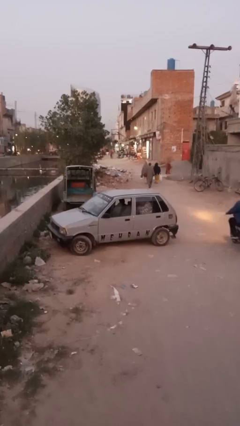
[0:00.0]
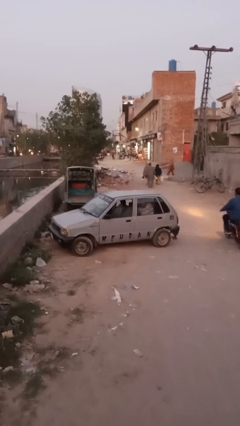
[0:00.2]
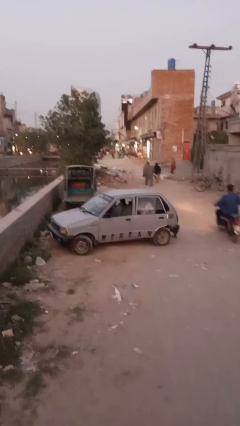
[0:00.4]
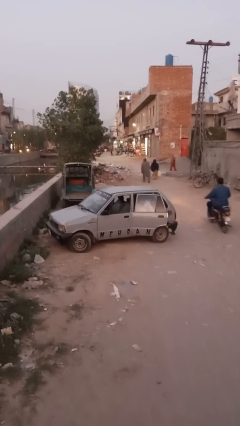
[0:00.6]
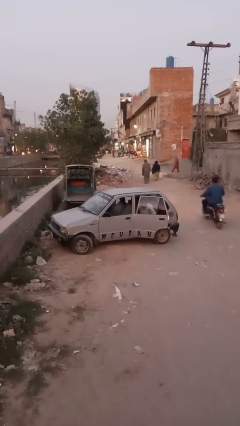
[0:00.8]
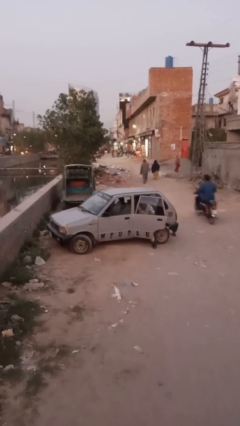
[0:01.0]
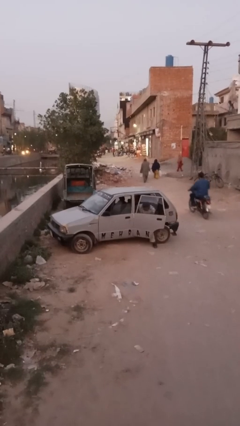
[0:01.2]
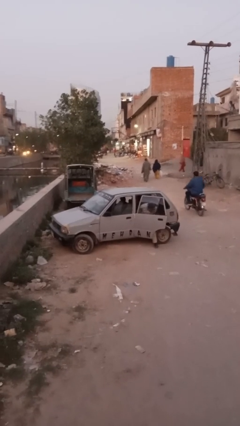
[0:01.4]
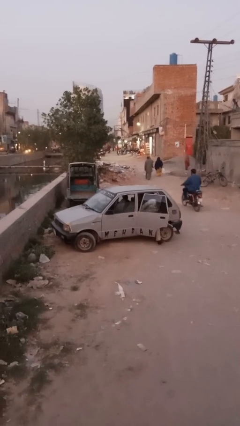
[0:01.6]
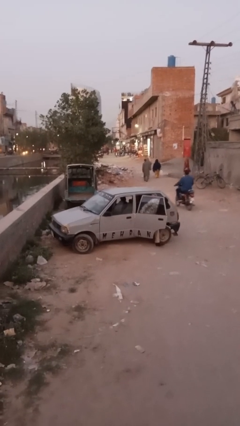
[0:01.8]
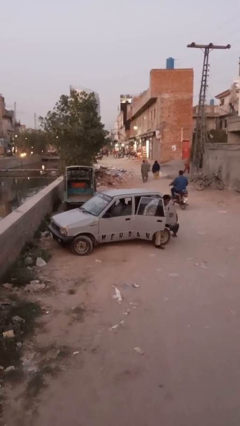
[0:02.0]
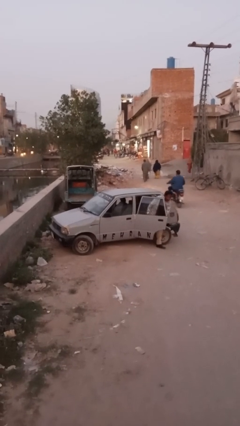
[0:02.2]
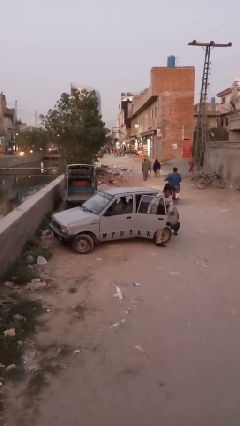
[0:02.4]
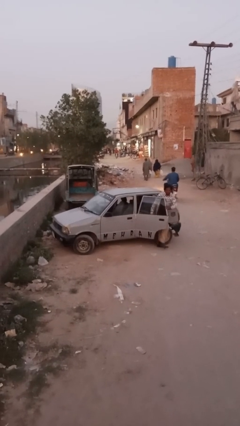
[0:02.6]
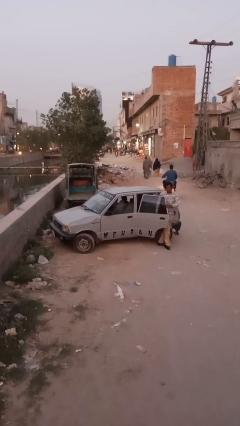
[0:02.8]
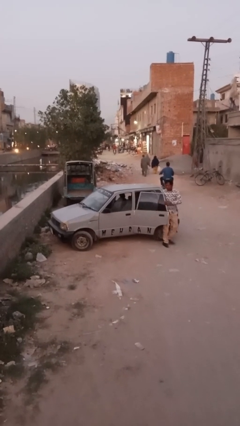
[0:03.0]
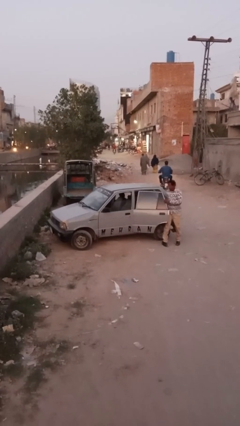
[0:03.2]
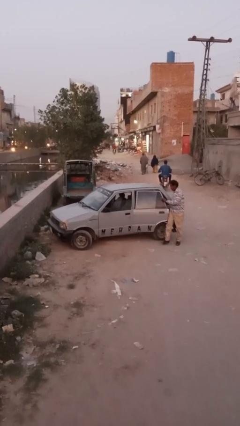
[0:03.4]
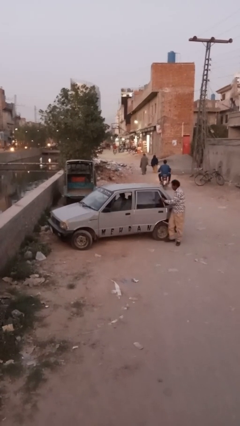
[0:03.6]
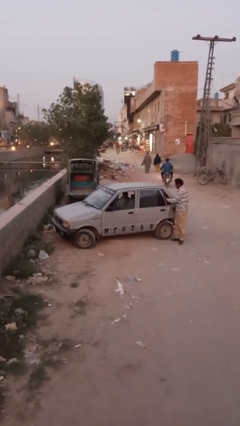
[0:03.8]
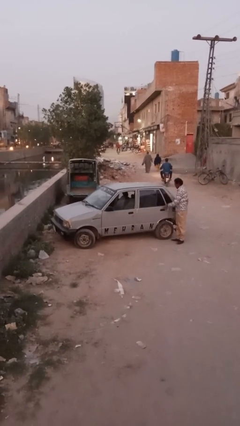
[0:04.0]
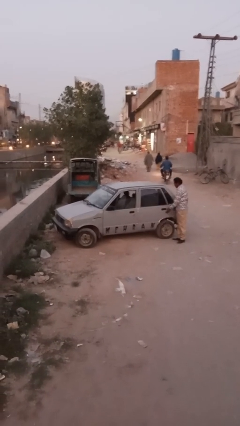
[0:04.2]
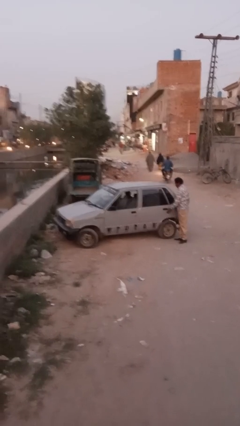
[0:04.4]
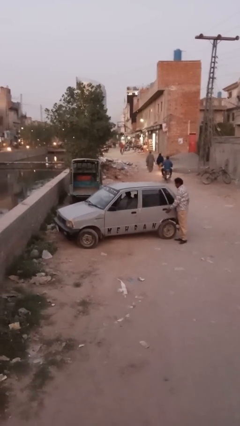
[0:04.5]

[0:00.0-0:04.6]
car drops off person

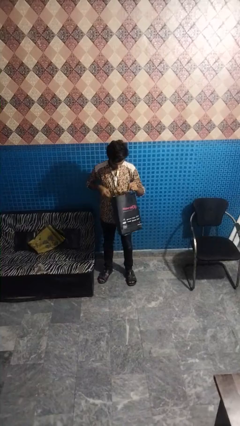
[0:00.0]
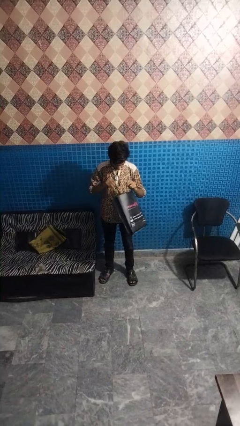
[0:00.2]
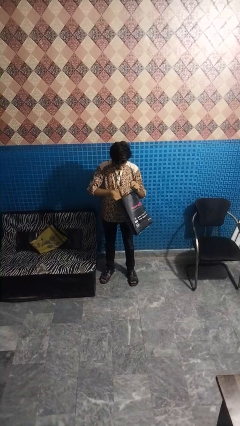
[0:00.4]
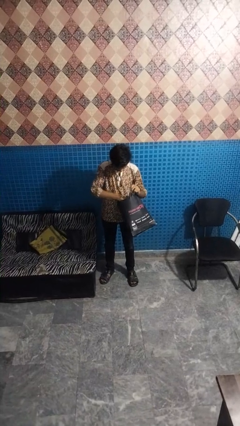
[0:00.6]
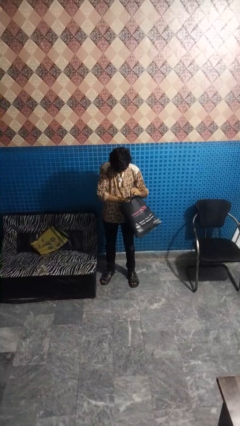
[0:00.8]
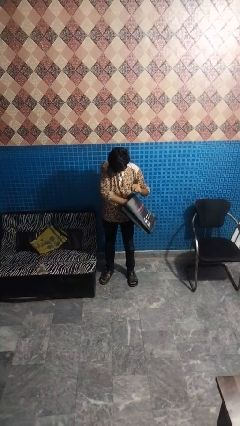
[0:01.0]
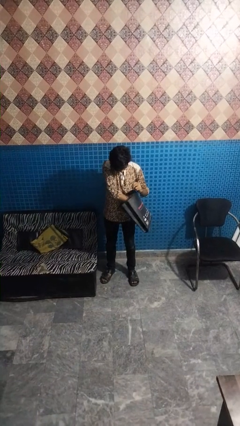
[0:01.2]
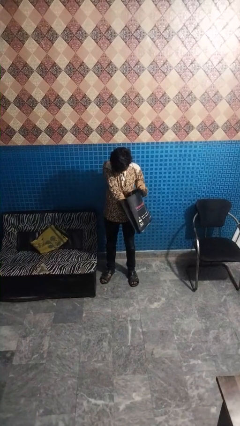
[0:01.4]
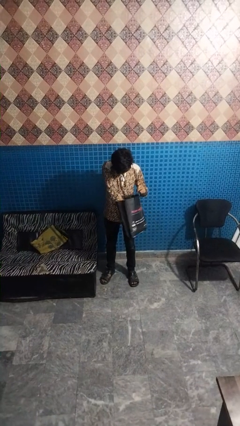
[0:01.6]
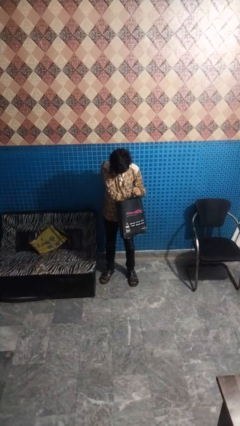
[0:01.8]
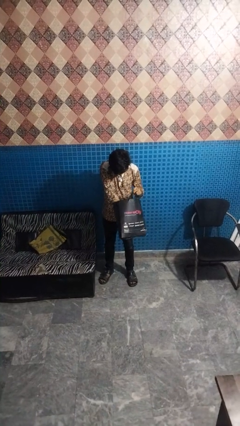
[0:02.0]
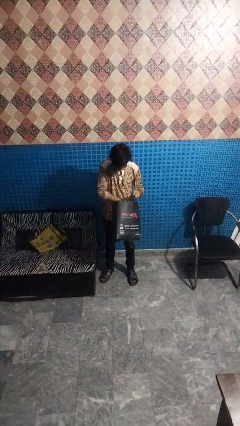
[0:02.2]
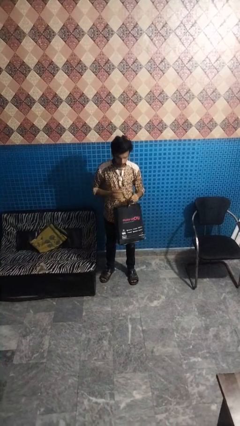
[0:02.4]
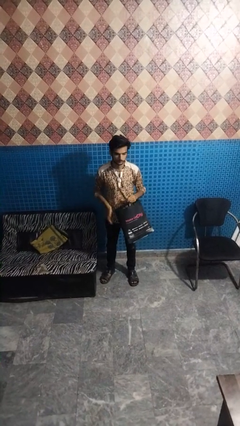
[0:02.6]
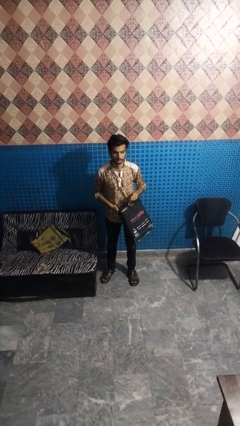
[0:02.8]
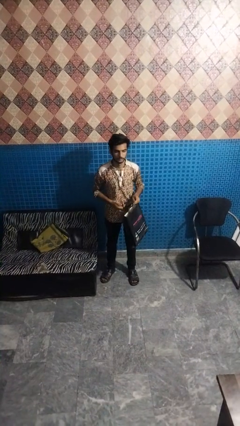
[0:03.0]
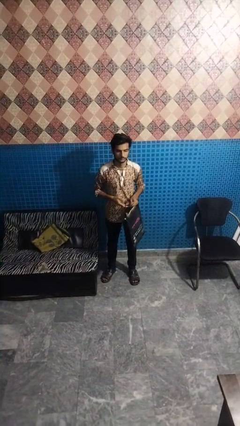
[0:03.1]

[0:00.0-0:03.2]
person searches in bag

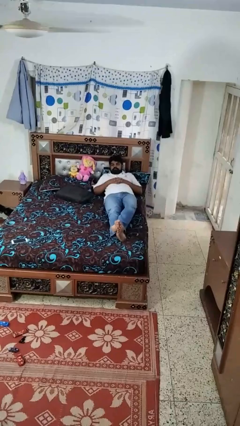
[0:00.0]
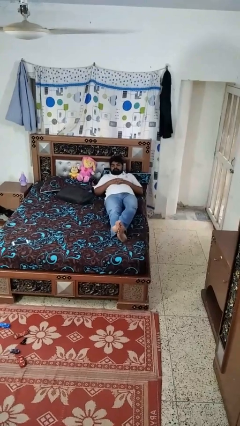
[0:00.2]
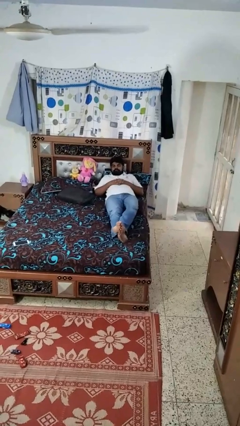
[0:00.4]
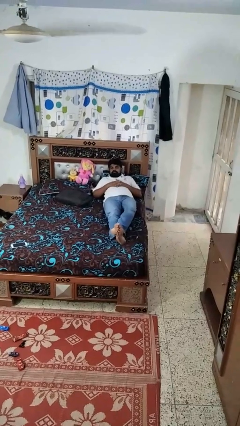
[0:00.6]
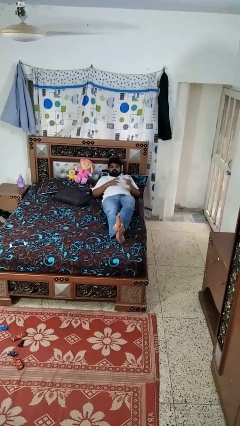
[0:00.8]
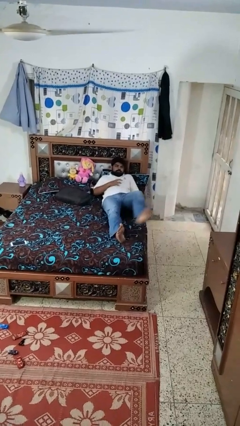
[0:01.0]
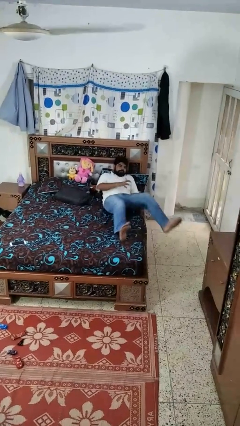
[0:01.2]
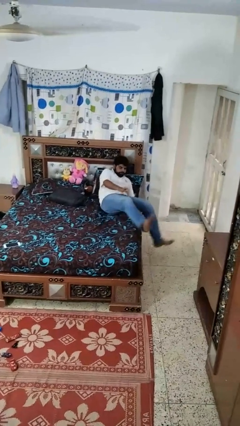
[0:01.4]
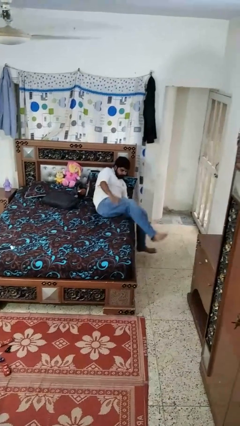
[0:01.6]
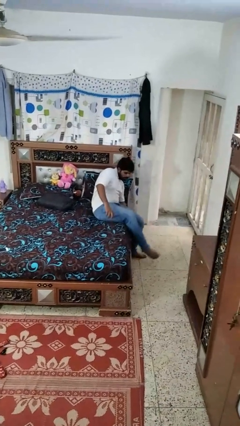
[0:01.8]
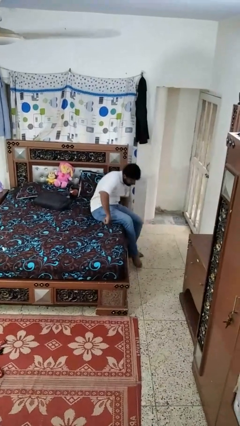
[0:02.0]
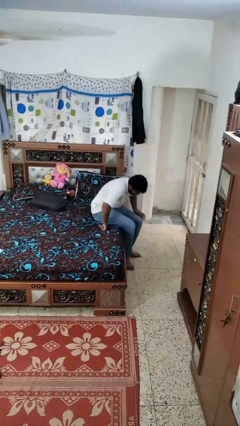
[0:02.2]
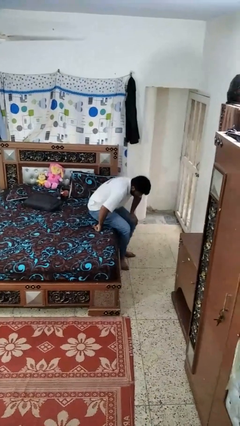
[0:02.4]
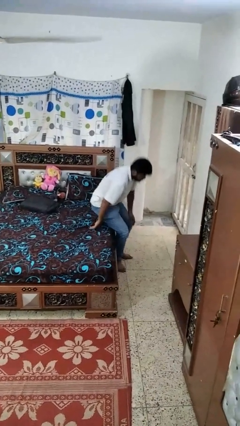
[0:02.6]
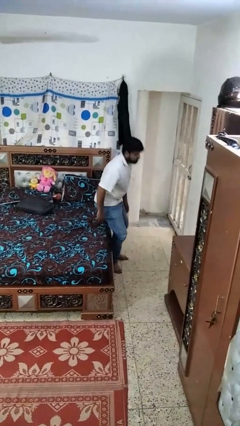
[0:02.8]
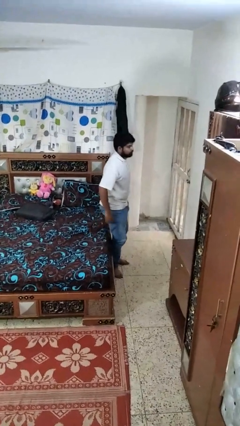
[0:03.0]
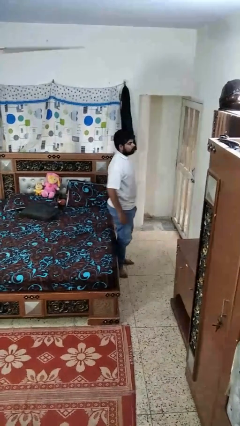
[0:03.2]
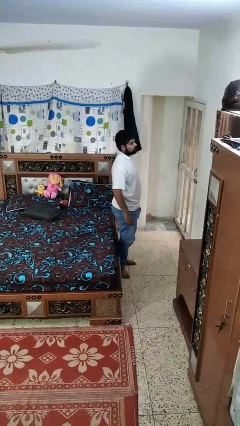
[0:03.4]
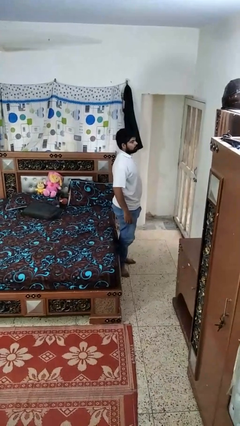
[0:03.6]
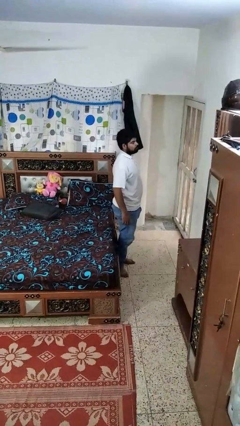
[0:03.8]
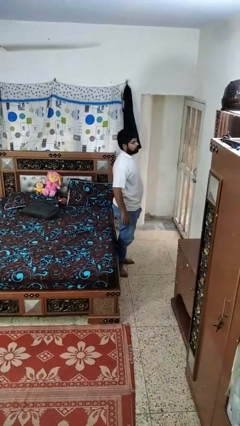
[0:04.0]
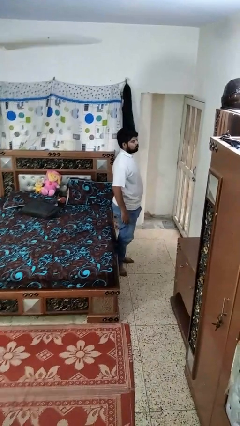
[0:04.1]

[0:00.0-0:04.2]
person stands up

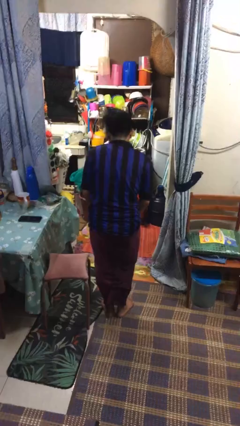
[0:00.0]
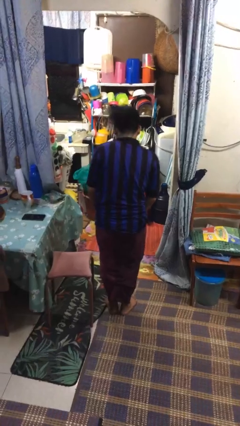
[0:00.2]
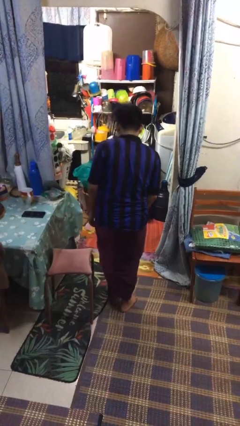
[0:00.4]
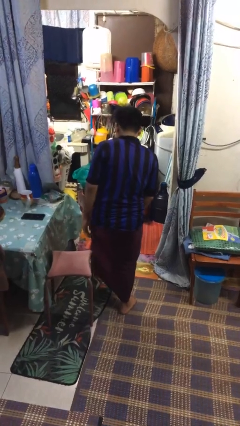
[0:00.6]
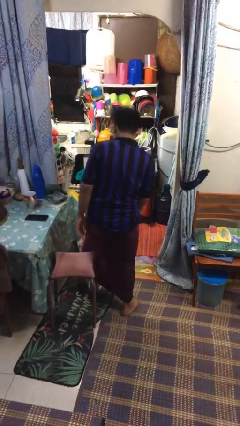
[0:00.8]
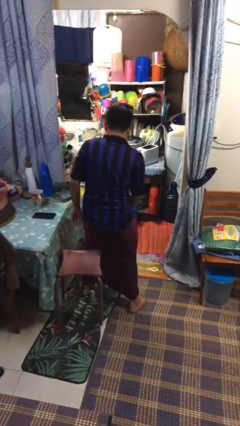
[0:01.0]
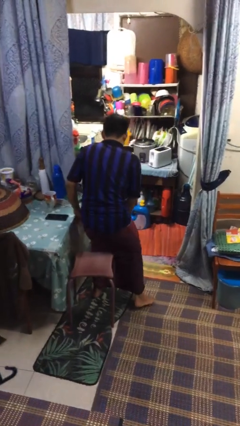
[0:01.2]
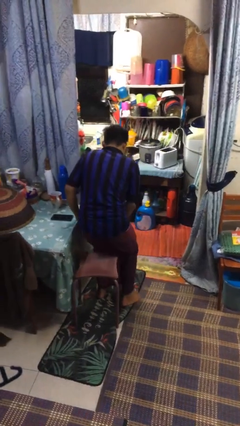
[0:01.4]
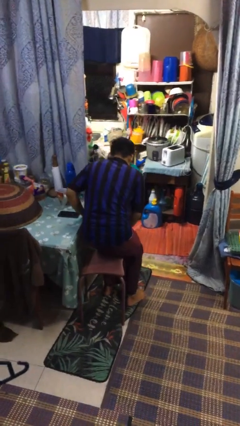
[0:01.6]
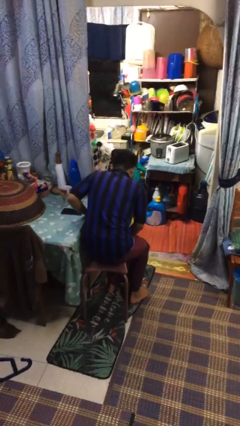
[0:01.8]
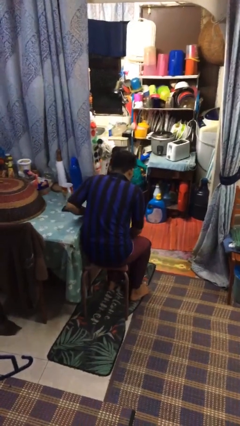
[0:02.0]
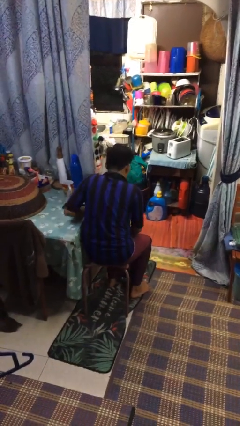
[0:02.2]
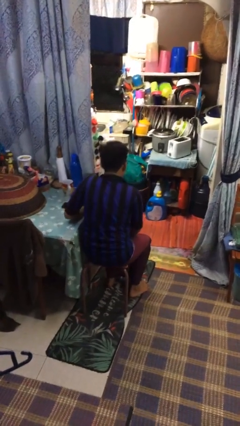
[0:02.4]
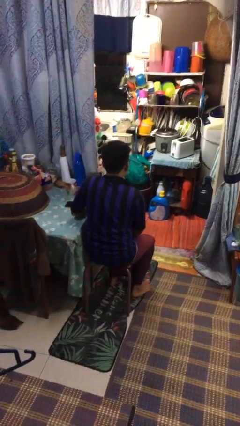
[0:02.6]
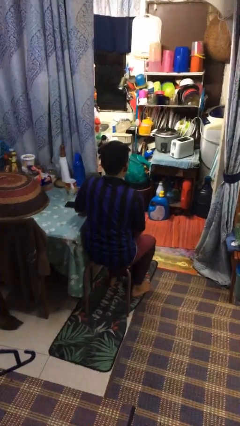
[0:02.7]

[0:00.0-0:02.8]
person sits down

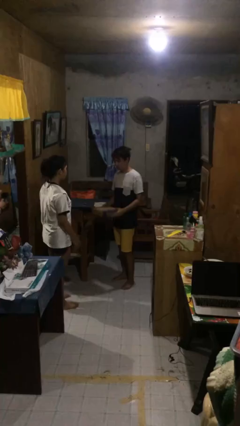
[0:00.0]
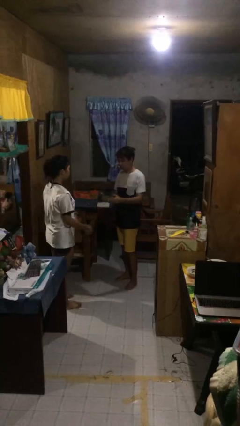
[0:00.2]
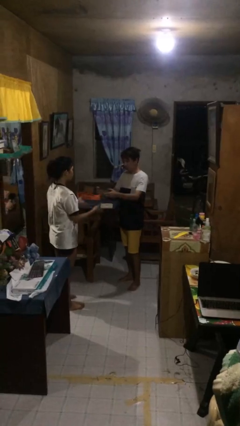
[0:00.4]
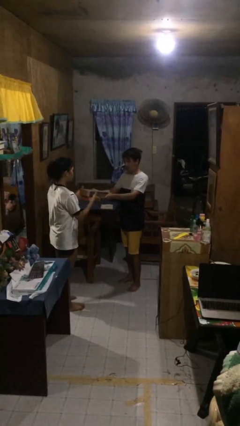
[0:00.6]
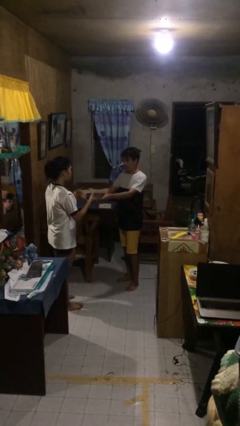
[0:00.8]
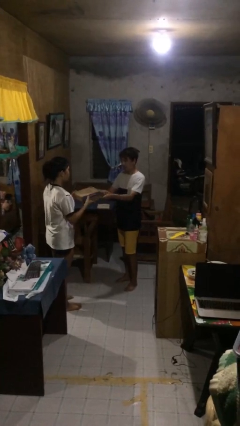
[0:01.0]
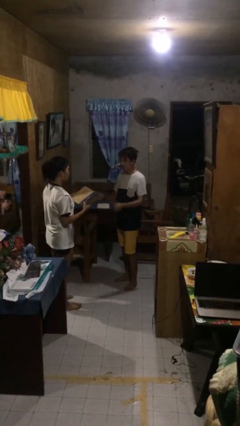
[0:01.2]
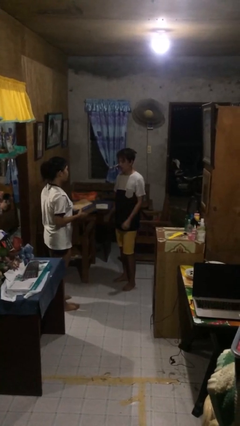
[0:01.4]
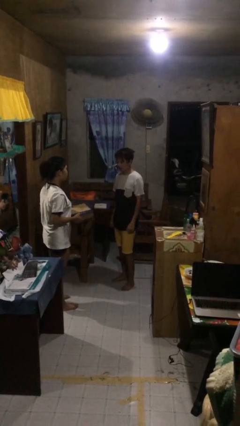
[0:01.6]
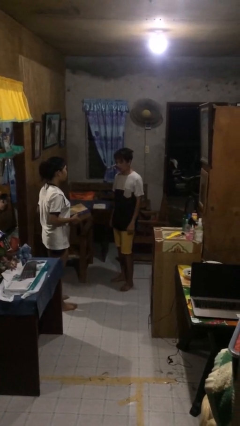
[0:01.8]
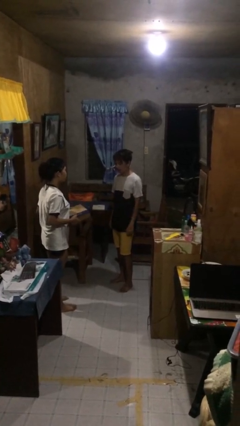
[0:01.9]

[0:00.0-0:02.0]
person transfers object to person
